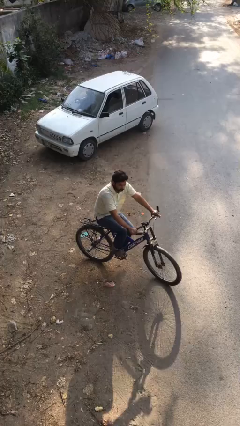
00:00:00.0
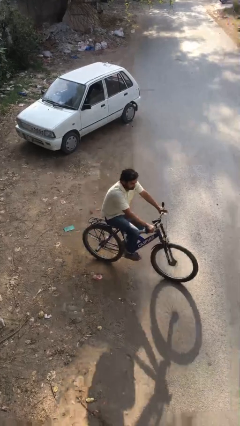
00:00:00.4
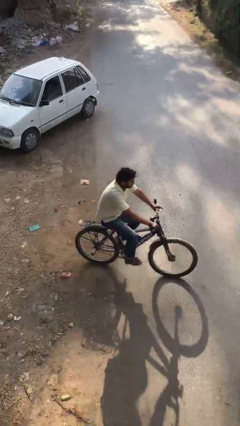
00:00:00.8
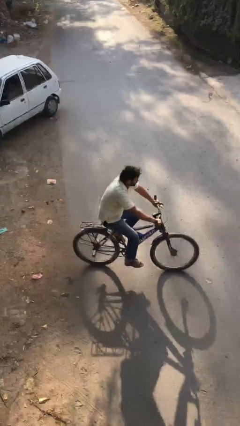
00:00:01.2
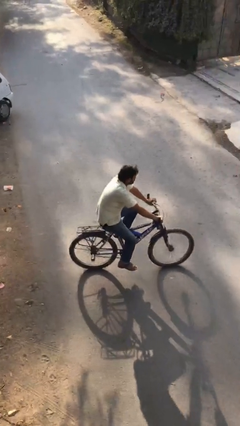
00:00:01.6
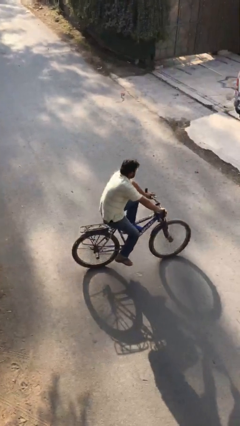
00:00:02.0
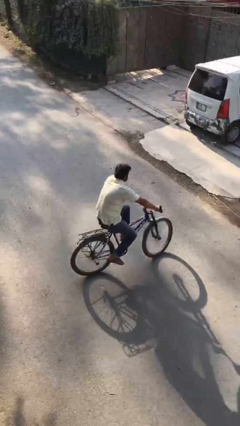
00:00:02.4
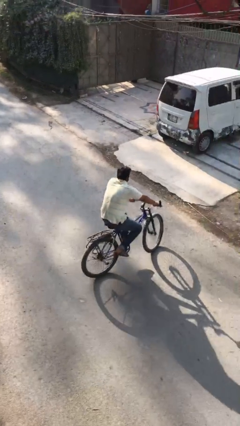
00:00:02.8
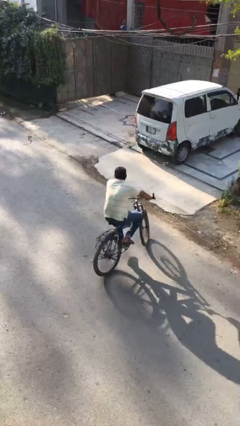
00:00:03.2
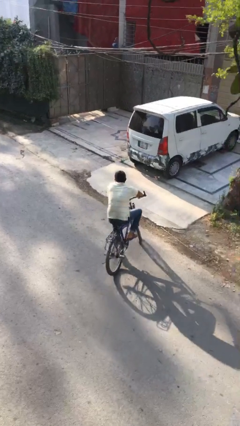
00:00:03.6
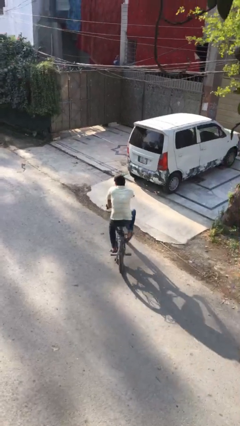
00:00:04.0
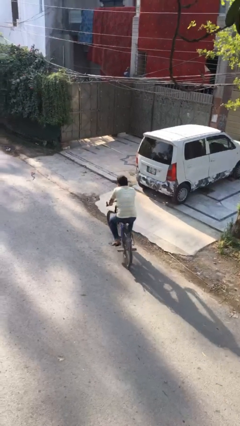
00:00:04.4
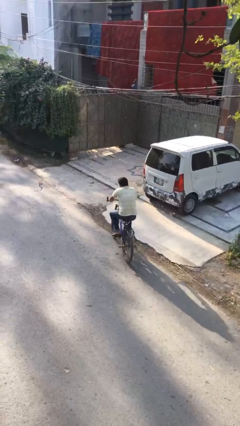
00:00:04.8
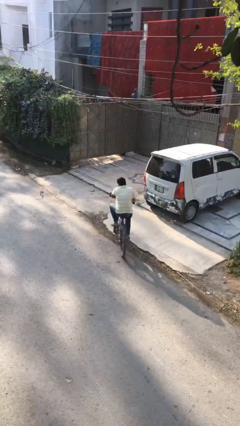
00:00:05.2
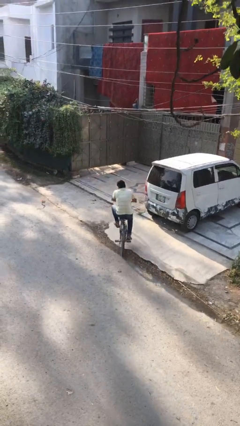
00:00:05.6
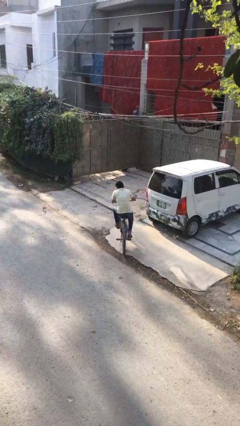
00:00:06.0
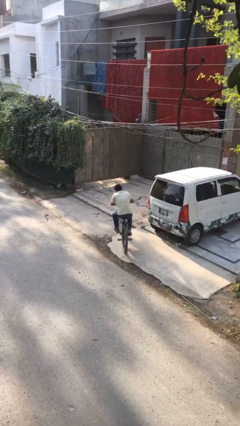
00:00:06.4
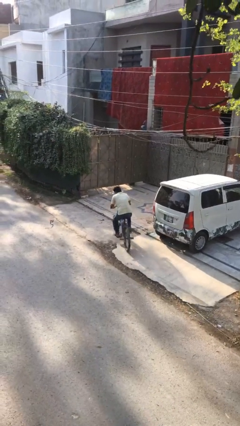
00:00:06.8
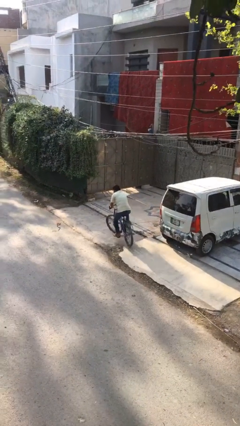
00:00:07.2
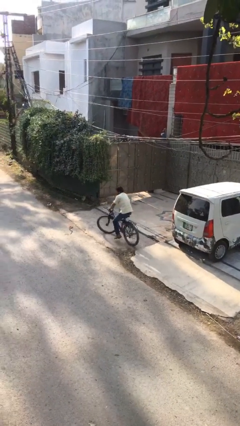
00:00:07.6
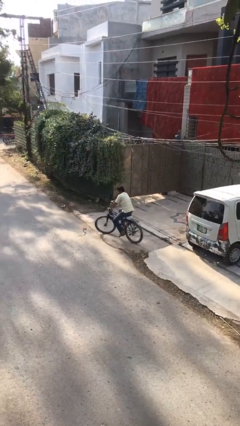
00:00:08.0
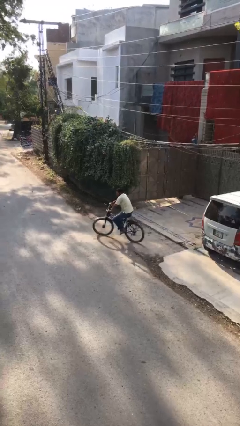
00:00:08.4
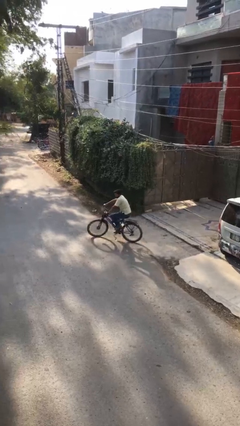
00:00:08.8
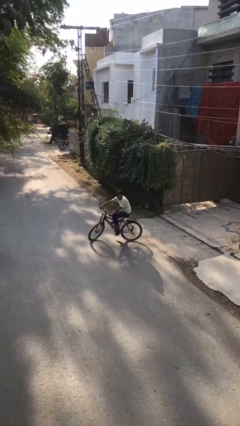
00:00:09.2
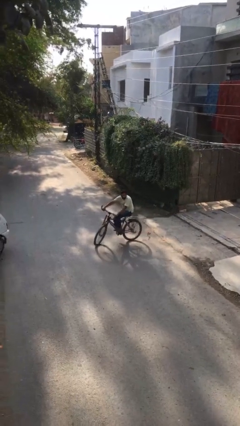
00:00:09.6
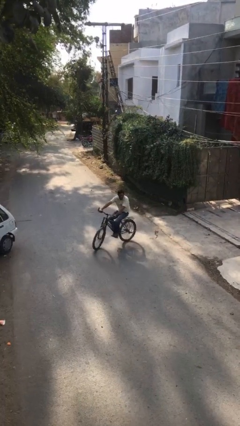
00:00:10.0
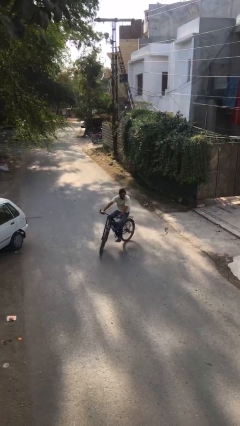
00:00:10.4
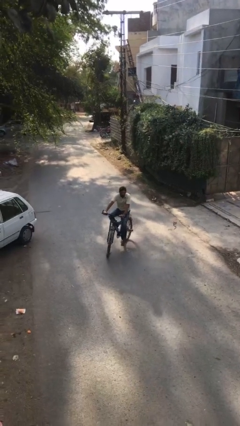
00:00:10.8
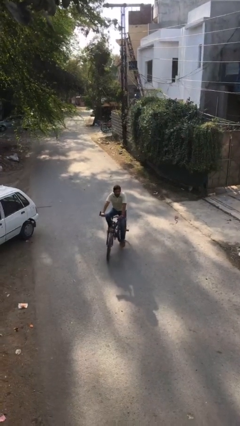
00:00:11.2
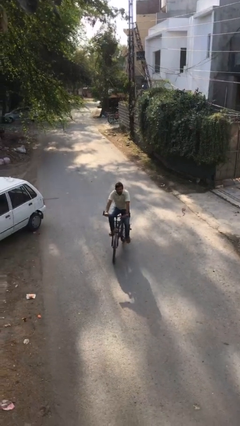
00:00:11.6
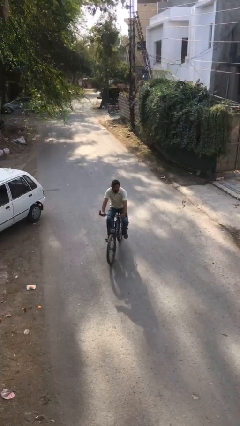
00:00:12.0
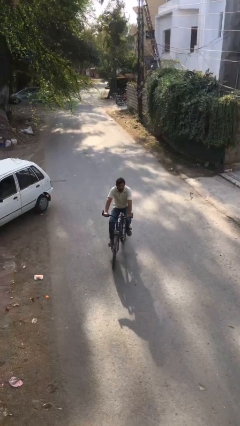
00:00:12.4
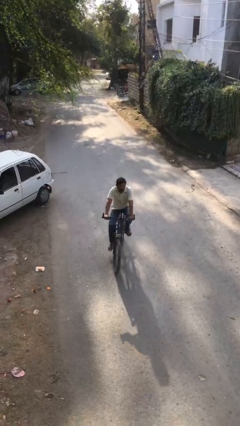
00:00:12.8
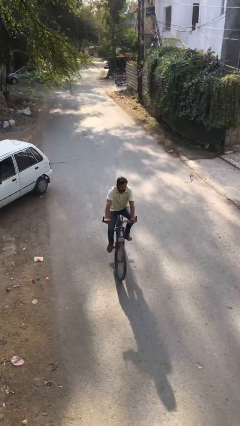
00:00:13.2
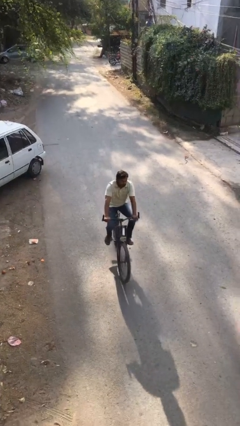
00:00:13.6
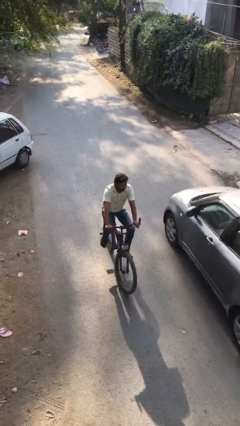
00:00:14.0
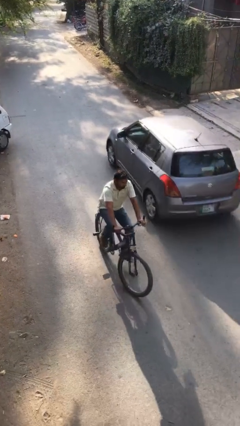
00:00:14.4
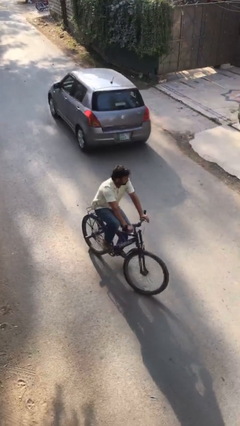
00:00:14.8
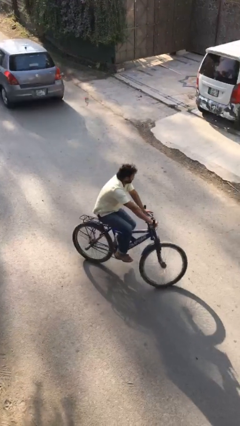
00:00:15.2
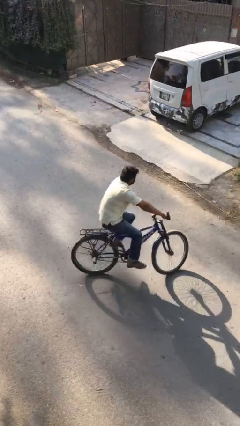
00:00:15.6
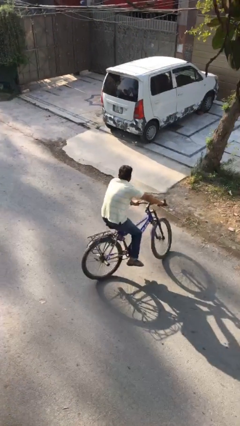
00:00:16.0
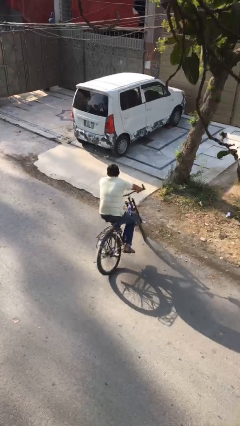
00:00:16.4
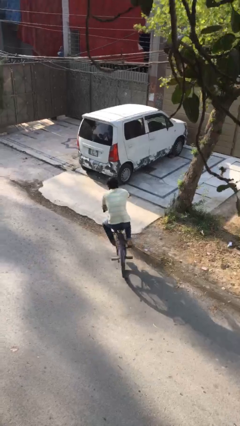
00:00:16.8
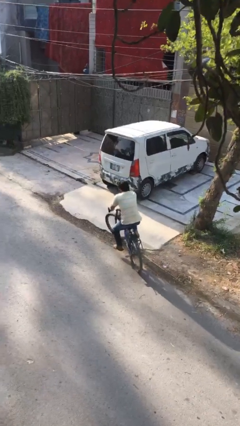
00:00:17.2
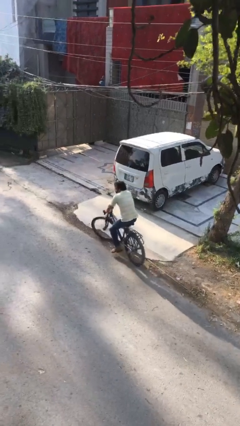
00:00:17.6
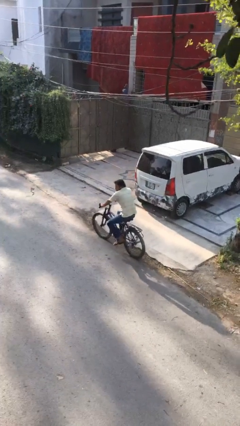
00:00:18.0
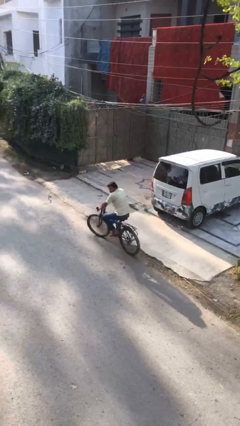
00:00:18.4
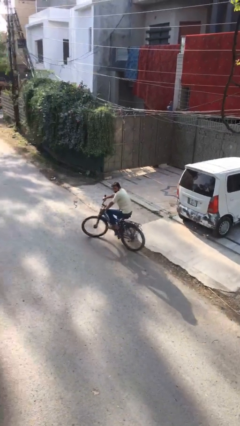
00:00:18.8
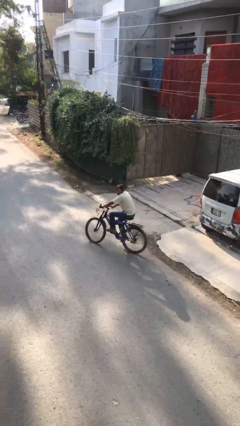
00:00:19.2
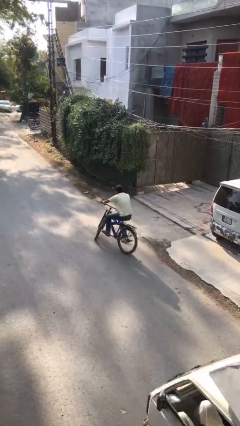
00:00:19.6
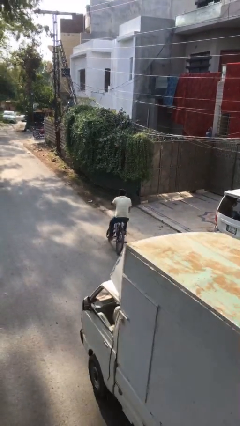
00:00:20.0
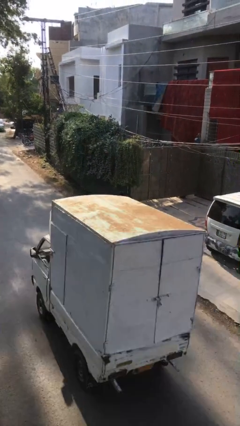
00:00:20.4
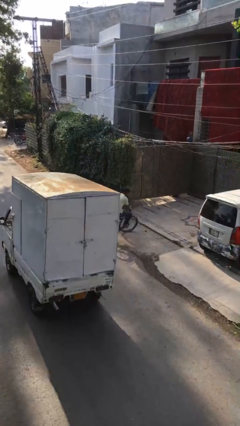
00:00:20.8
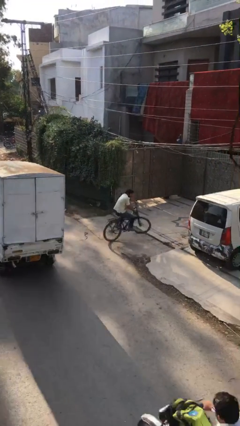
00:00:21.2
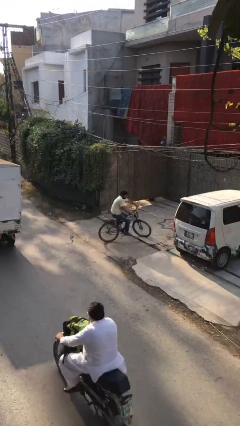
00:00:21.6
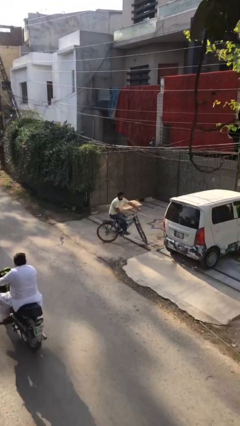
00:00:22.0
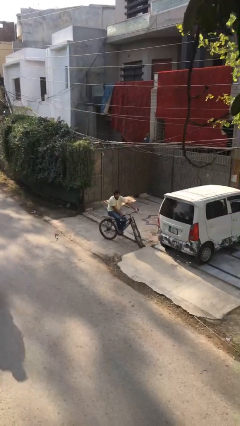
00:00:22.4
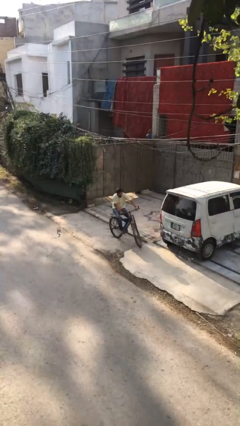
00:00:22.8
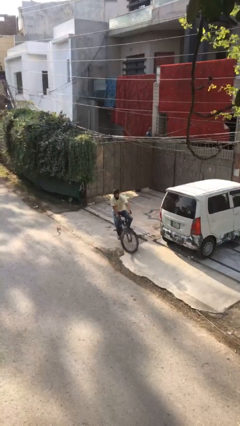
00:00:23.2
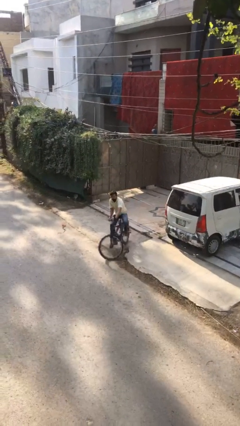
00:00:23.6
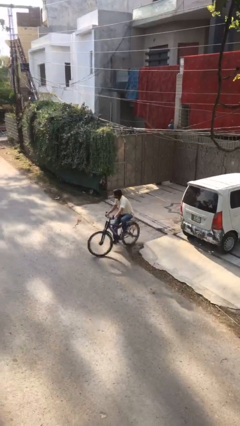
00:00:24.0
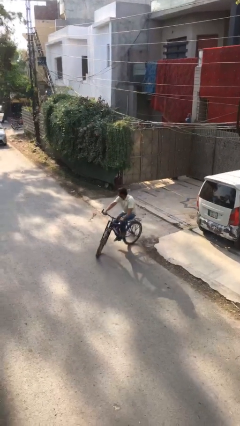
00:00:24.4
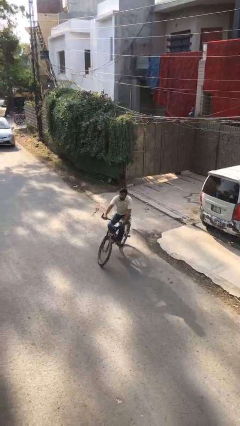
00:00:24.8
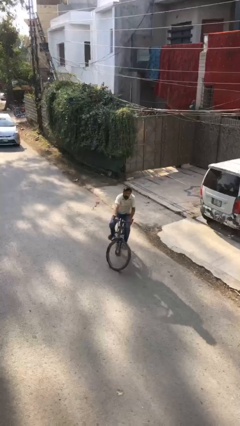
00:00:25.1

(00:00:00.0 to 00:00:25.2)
person rides bicycle

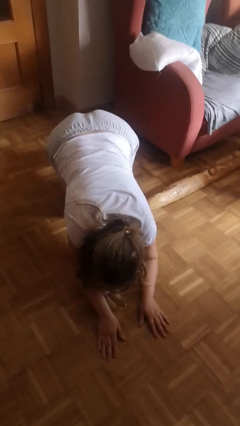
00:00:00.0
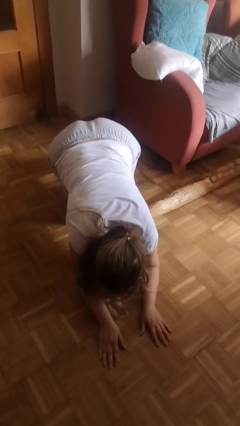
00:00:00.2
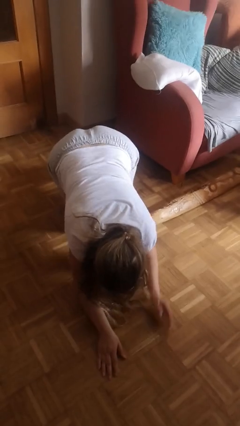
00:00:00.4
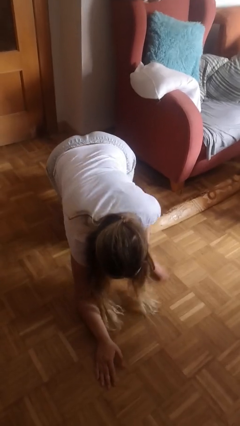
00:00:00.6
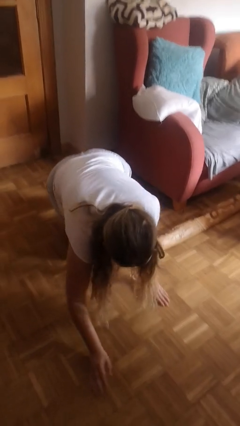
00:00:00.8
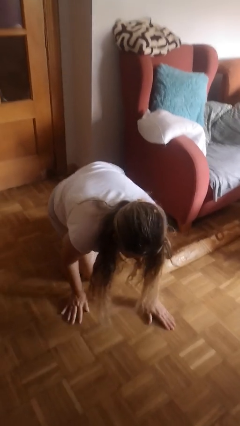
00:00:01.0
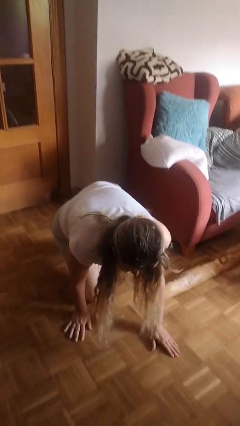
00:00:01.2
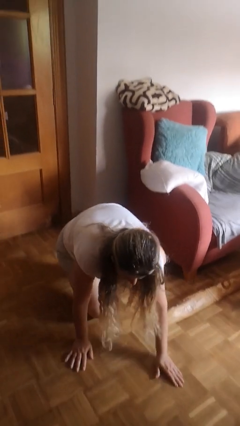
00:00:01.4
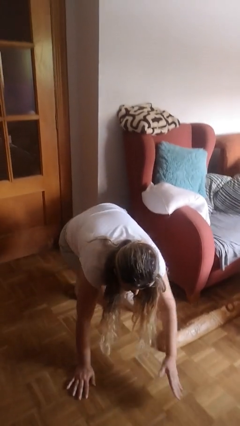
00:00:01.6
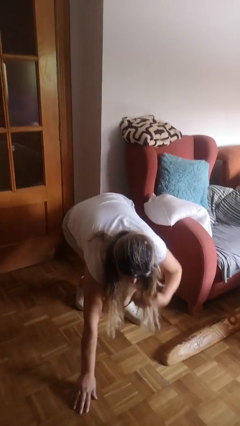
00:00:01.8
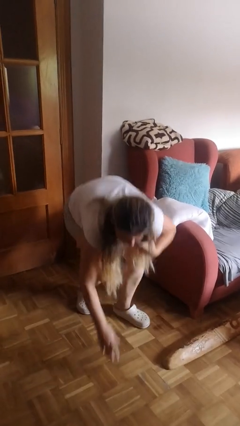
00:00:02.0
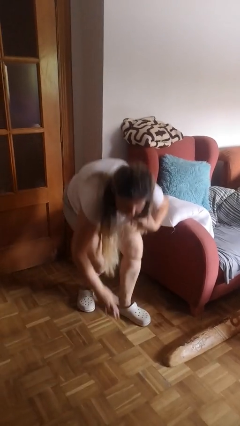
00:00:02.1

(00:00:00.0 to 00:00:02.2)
person stands up from floor

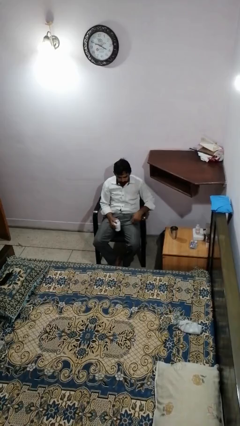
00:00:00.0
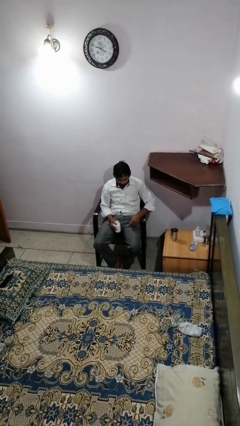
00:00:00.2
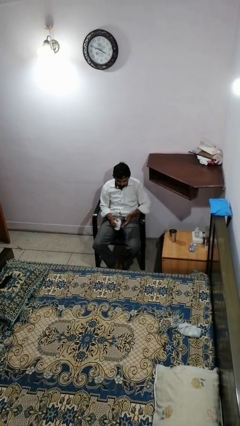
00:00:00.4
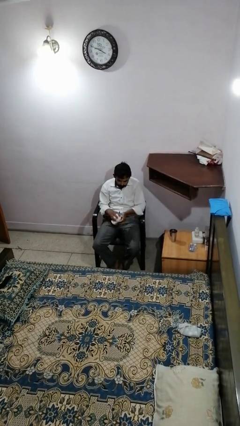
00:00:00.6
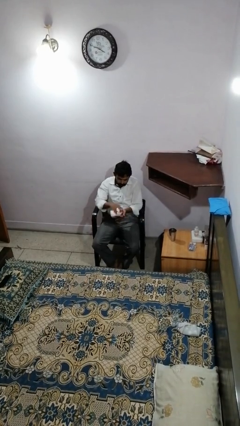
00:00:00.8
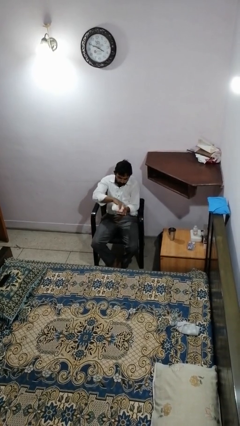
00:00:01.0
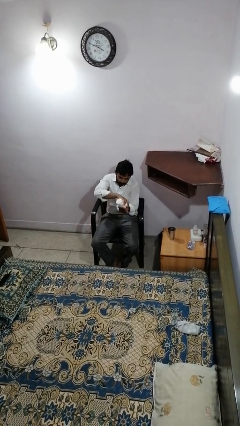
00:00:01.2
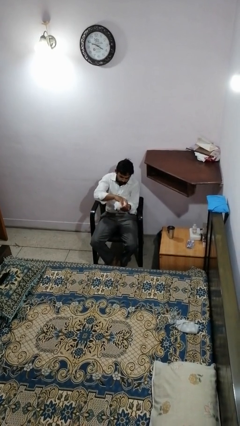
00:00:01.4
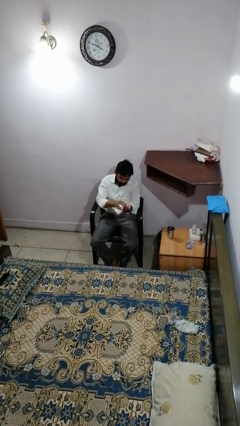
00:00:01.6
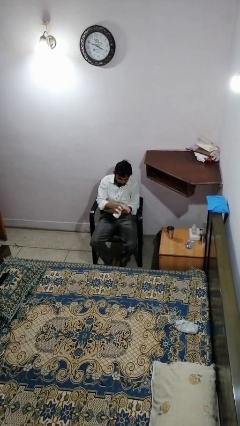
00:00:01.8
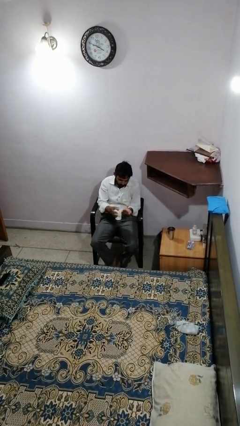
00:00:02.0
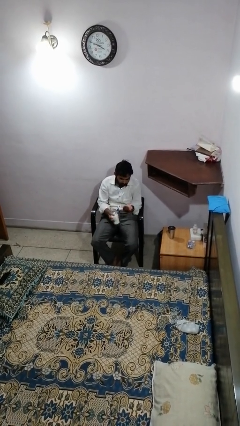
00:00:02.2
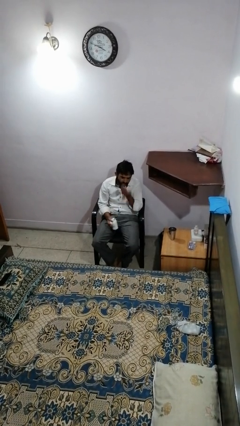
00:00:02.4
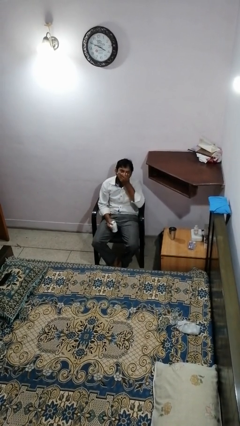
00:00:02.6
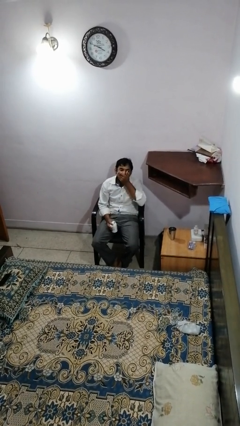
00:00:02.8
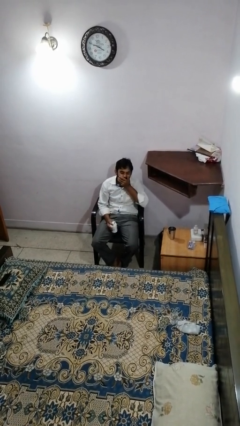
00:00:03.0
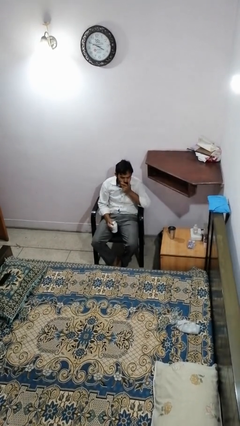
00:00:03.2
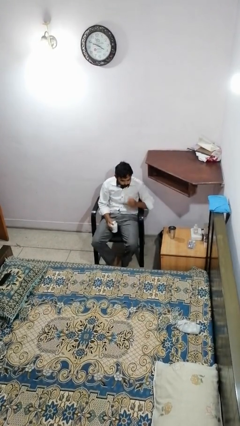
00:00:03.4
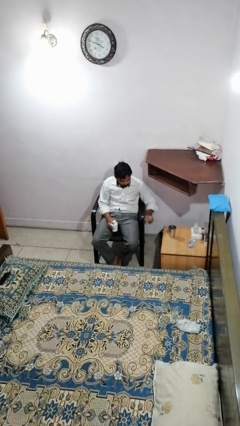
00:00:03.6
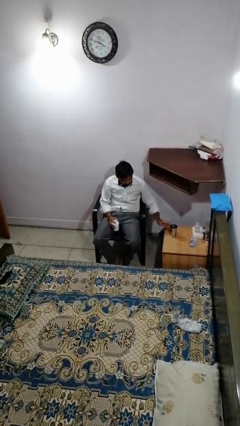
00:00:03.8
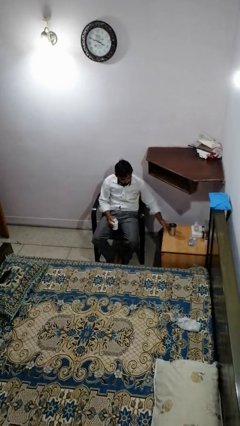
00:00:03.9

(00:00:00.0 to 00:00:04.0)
person takes medicine pills
